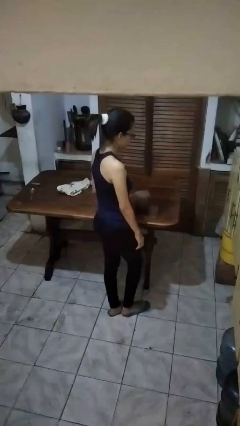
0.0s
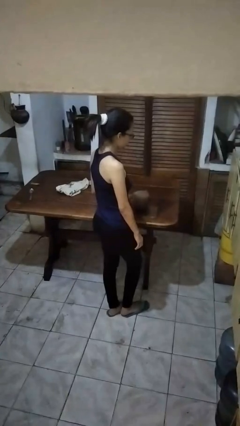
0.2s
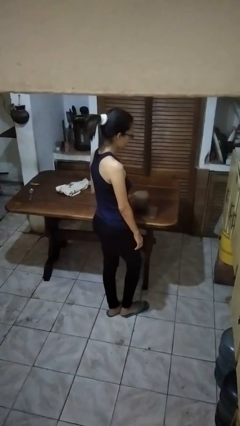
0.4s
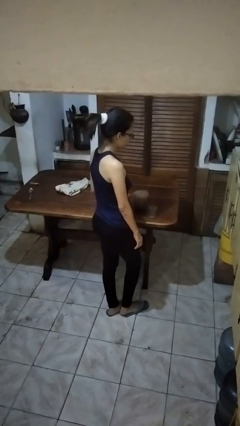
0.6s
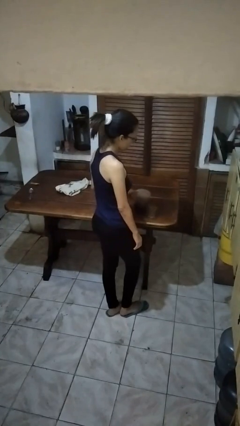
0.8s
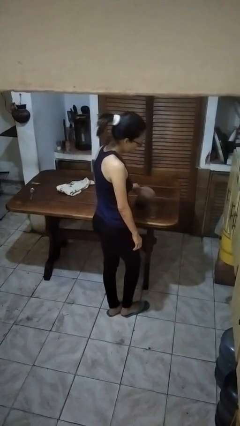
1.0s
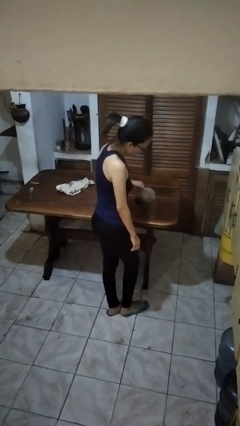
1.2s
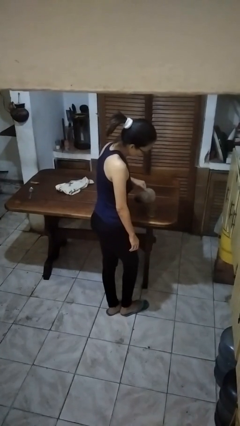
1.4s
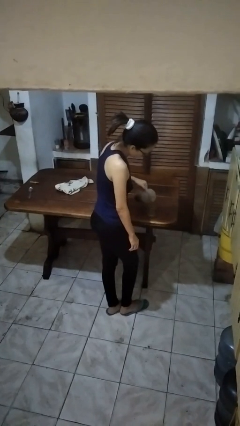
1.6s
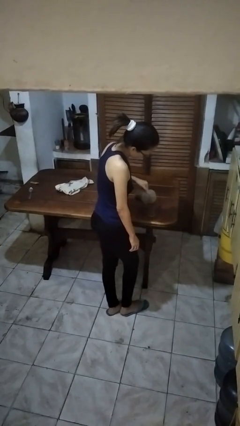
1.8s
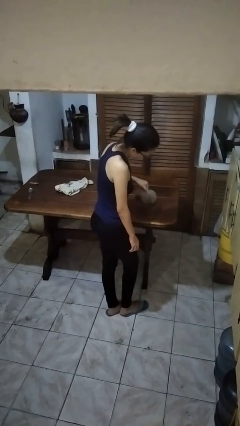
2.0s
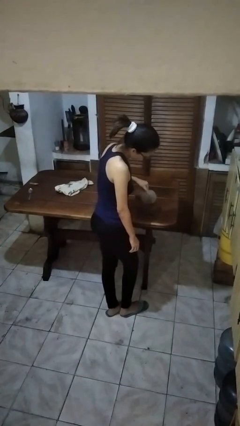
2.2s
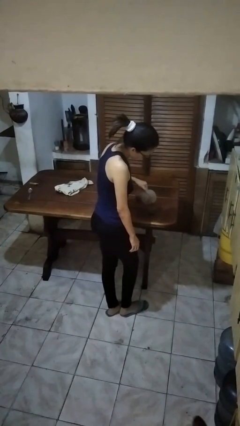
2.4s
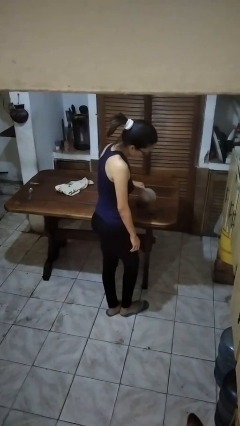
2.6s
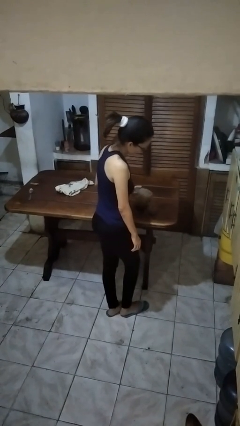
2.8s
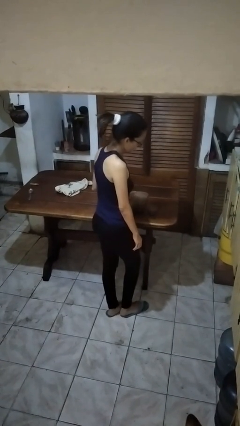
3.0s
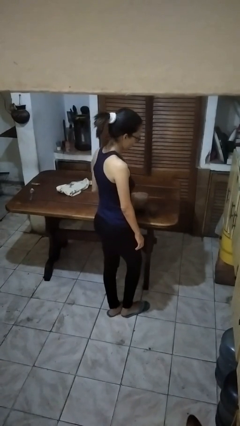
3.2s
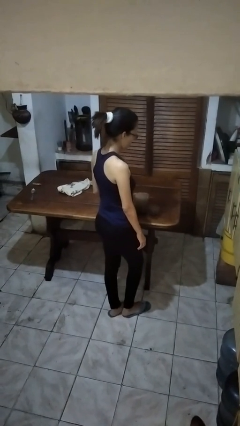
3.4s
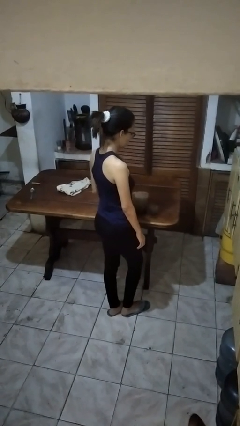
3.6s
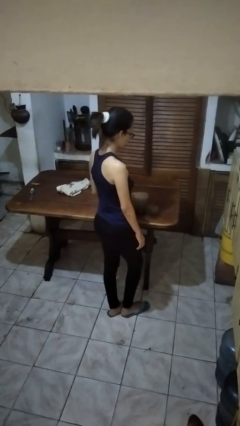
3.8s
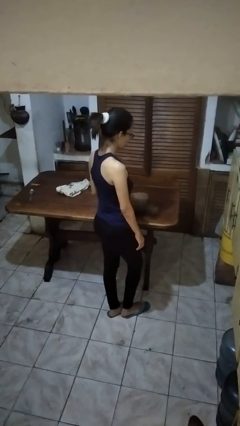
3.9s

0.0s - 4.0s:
person pours coffee into mug

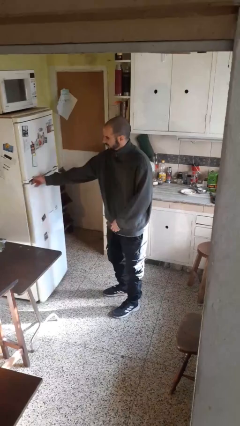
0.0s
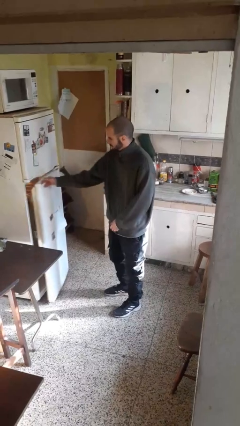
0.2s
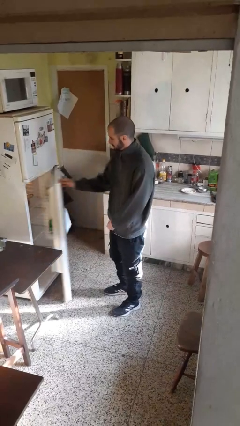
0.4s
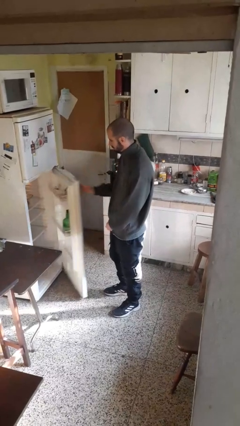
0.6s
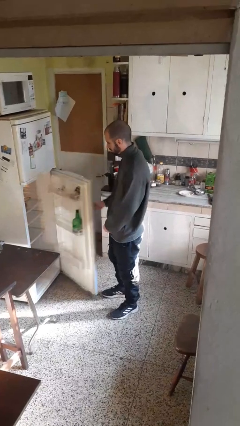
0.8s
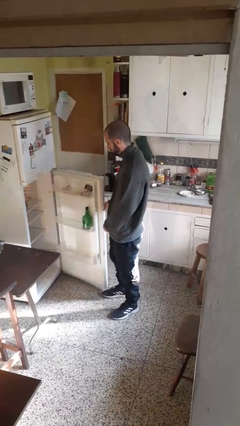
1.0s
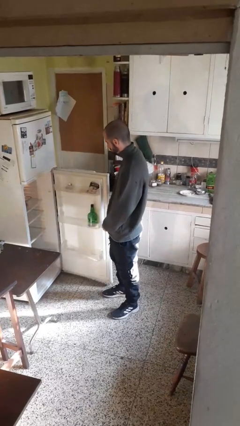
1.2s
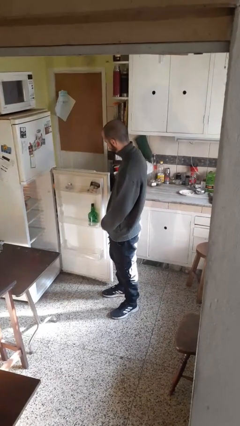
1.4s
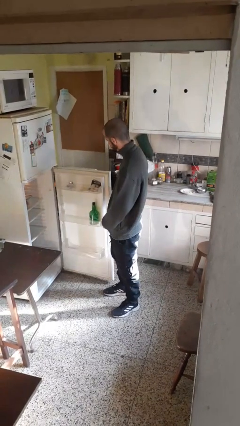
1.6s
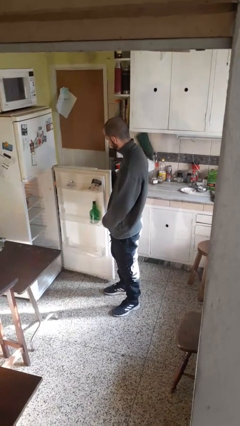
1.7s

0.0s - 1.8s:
person opens refrigerator

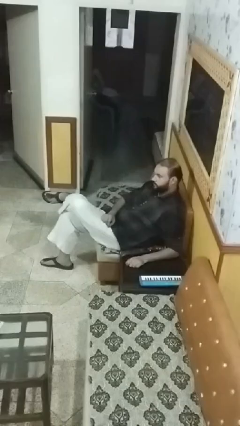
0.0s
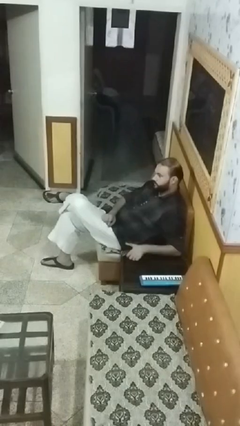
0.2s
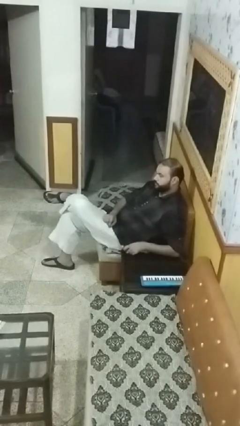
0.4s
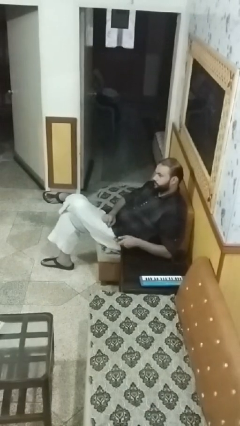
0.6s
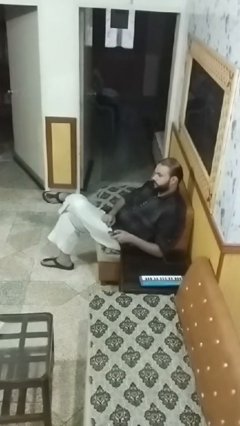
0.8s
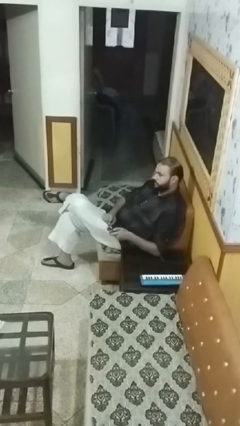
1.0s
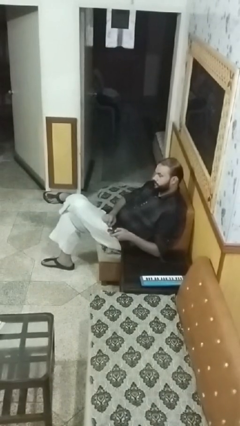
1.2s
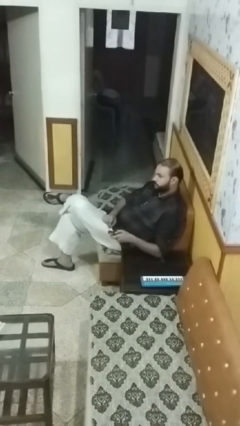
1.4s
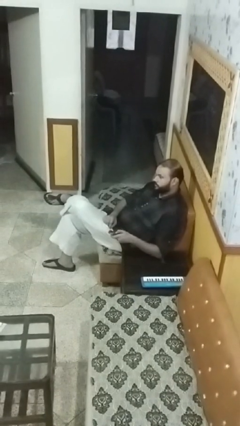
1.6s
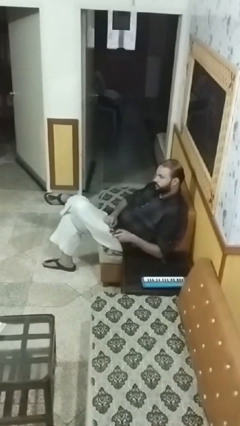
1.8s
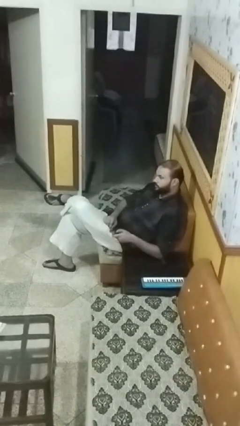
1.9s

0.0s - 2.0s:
person uses television remote

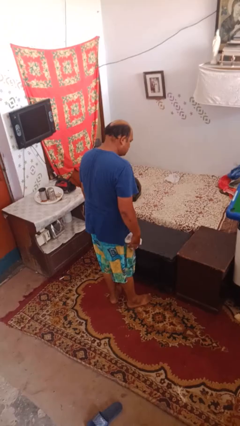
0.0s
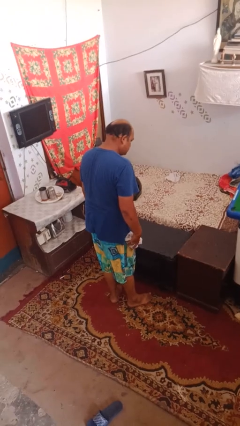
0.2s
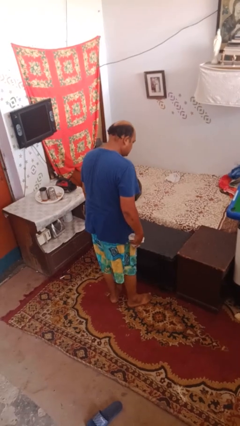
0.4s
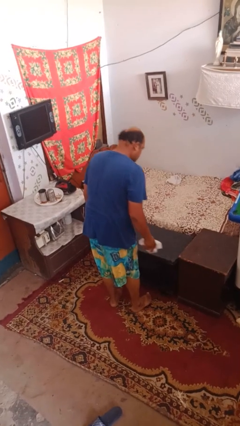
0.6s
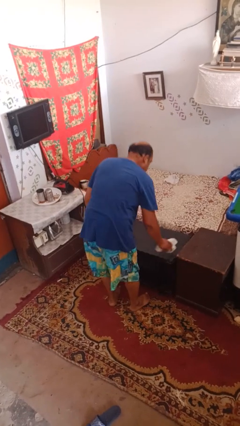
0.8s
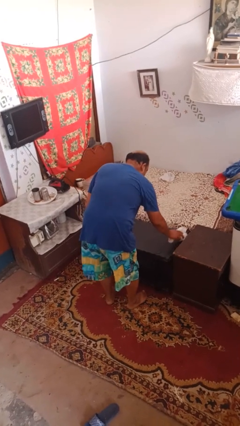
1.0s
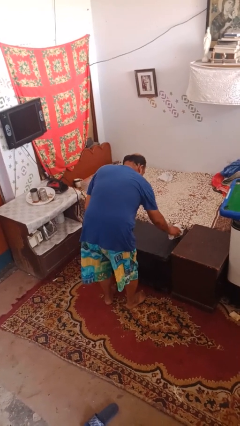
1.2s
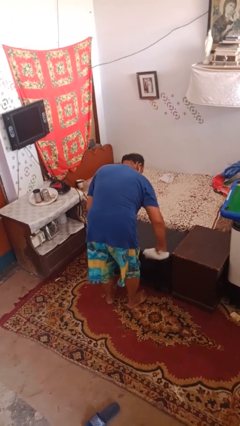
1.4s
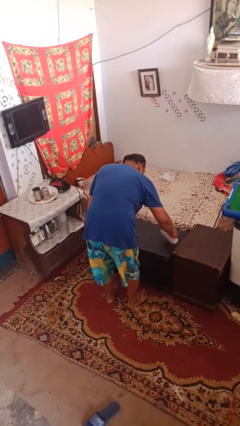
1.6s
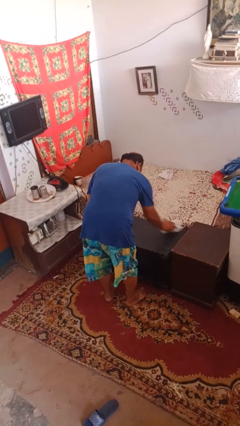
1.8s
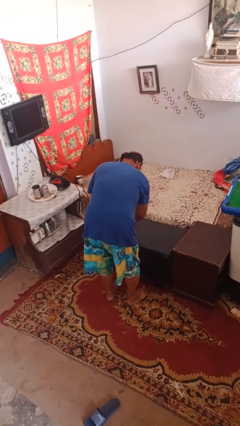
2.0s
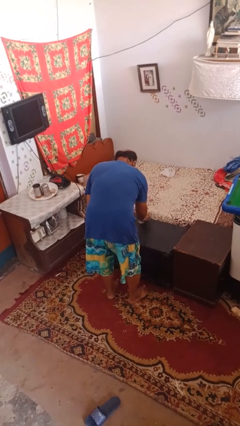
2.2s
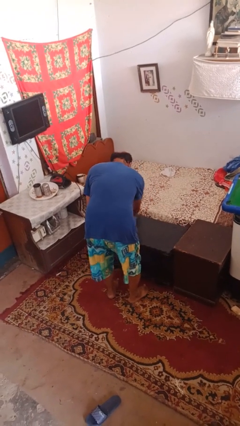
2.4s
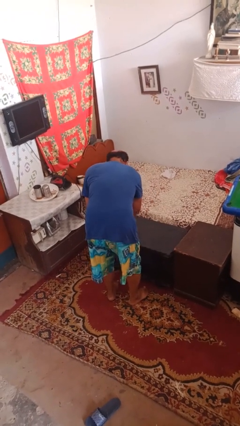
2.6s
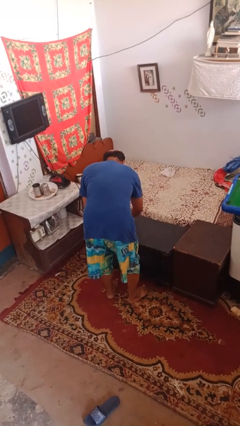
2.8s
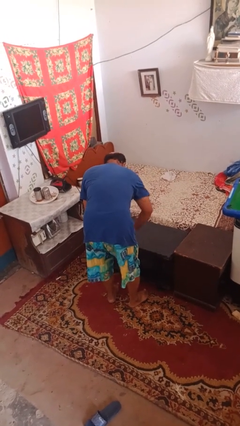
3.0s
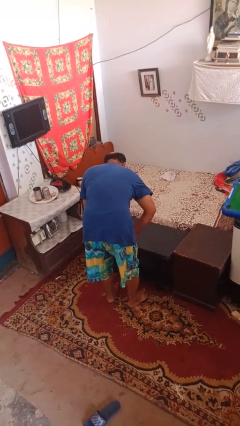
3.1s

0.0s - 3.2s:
person dusts furniture

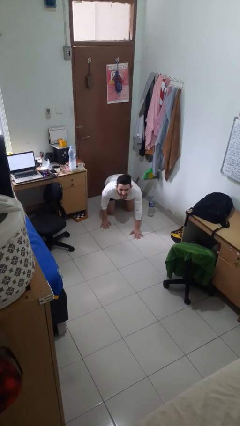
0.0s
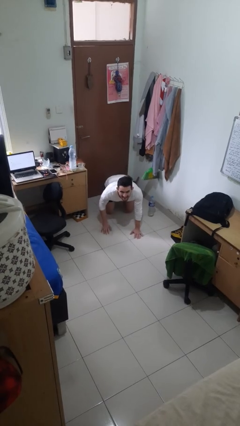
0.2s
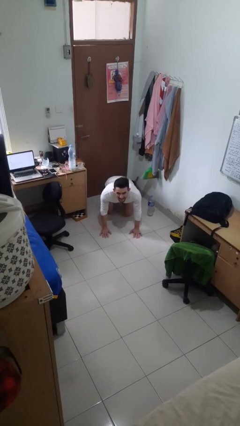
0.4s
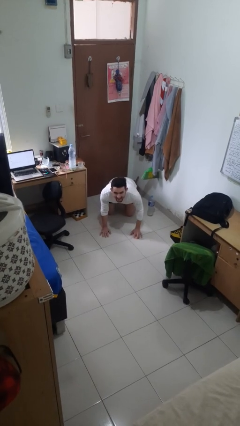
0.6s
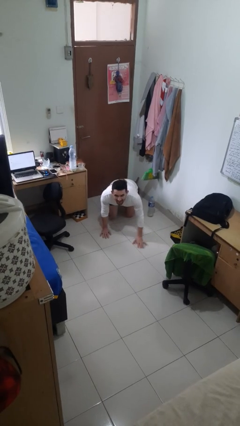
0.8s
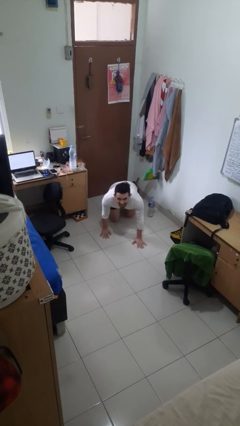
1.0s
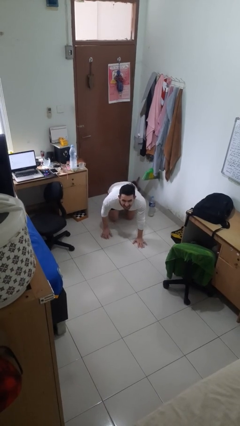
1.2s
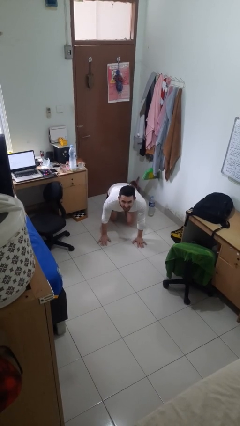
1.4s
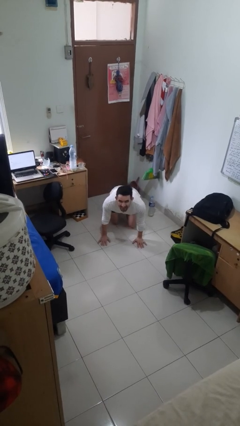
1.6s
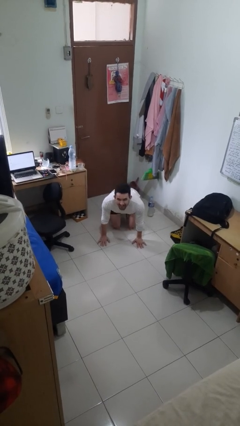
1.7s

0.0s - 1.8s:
person crawls

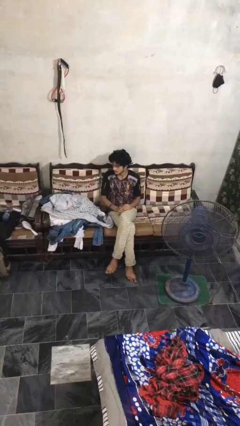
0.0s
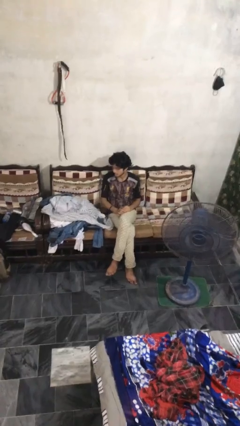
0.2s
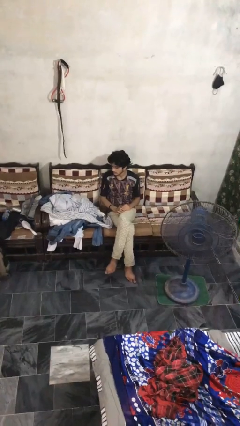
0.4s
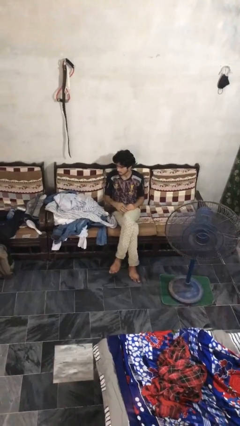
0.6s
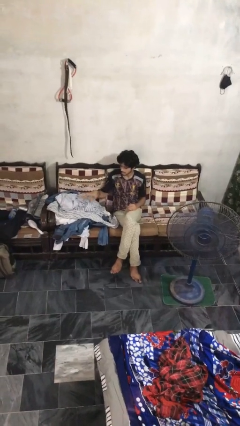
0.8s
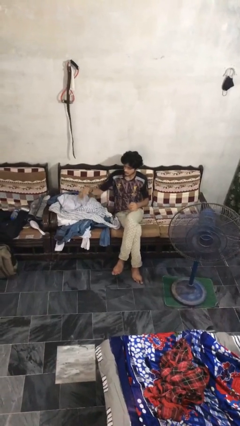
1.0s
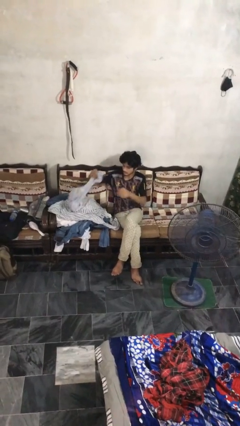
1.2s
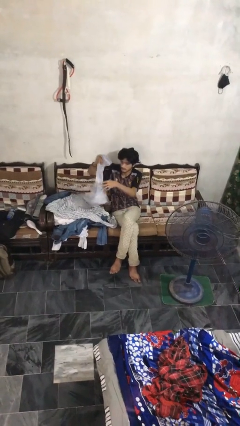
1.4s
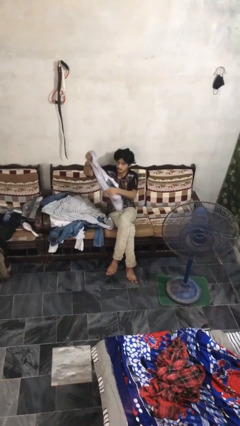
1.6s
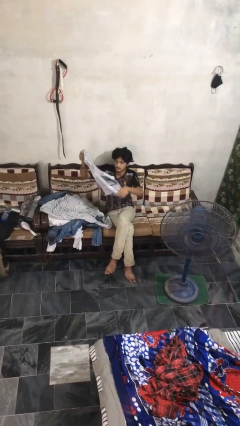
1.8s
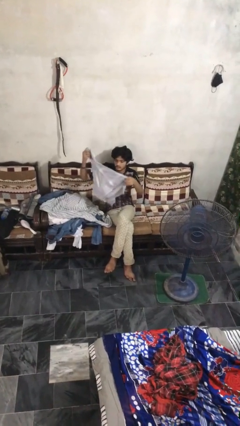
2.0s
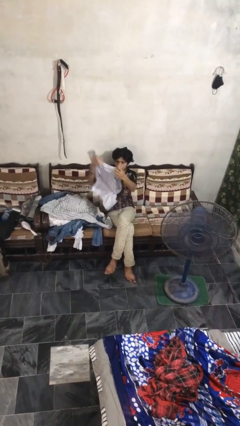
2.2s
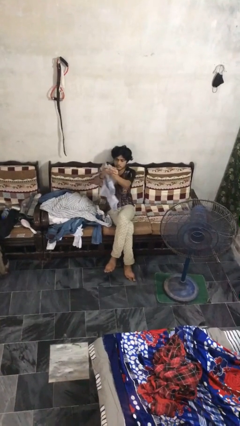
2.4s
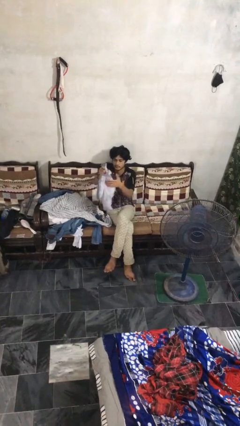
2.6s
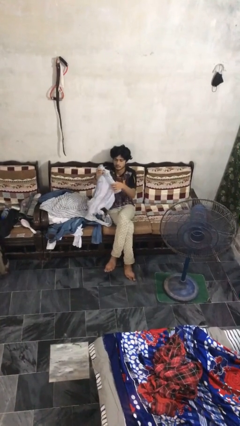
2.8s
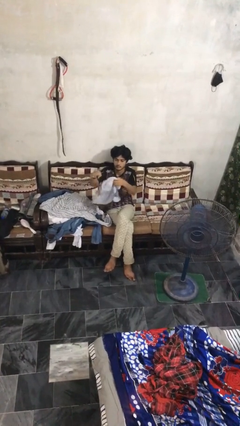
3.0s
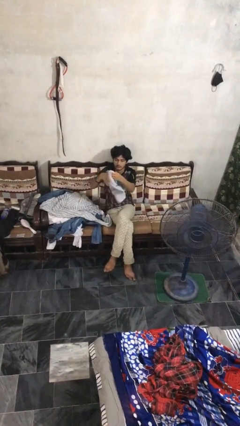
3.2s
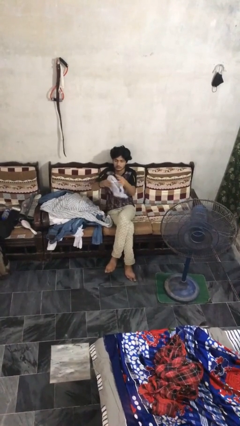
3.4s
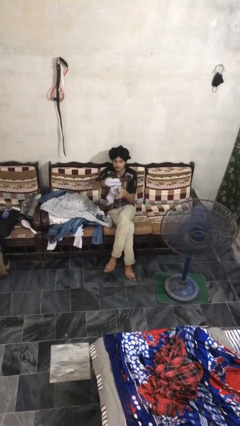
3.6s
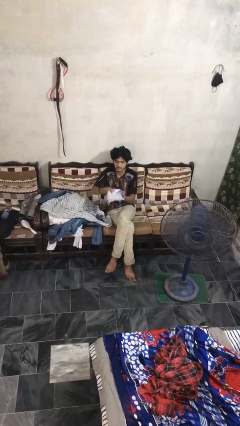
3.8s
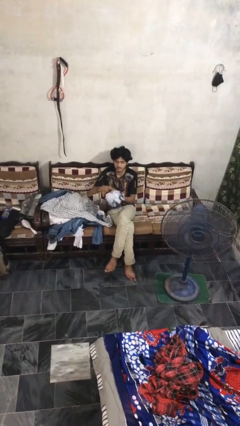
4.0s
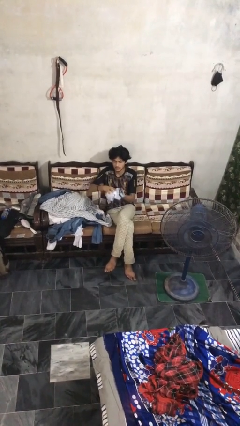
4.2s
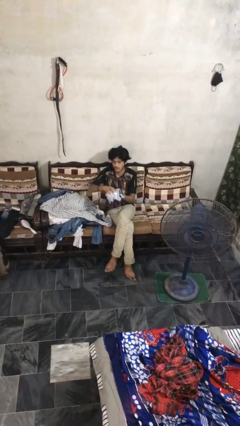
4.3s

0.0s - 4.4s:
person folds shirt

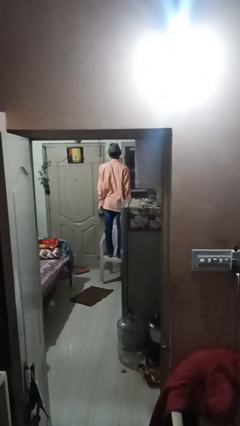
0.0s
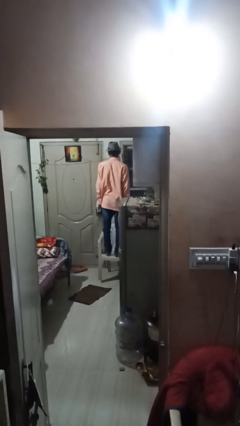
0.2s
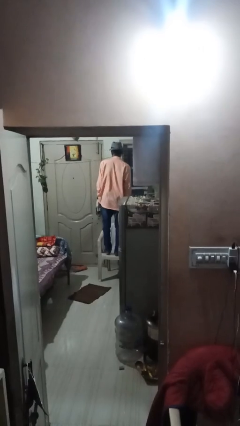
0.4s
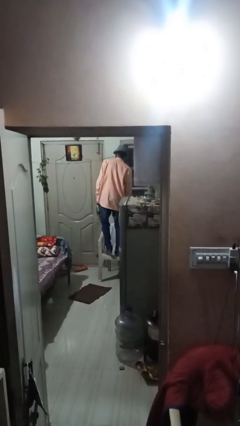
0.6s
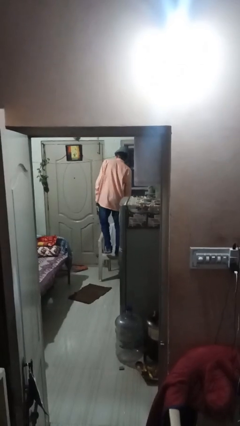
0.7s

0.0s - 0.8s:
person climbs off chair
